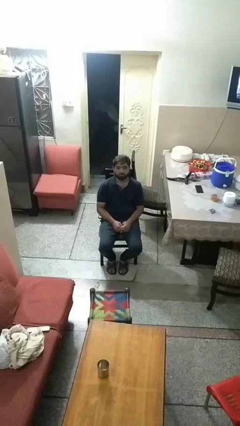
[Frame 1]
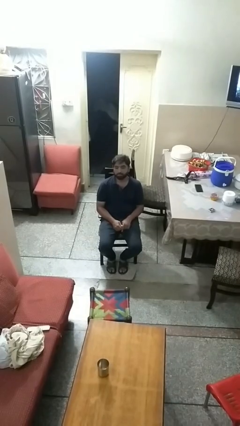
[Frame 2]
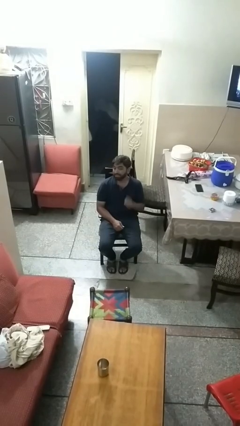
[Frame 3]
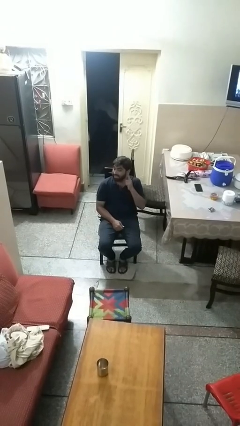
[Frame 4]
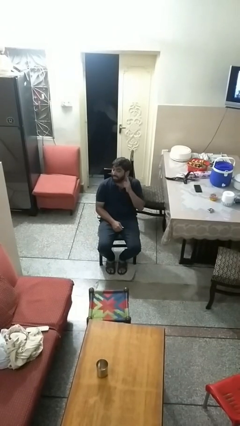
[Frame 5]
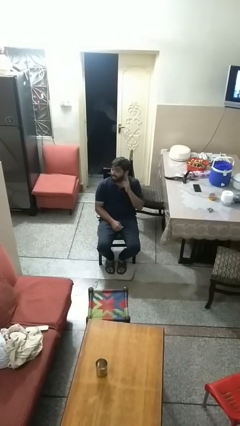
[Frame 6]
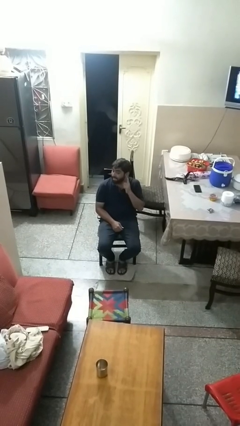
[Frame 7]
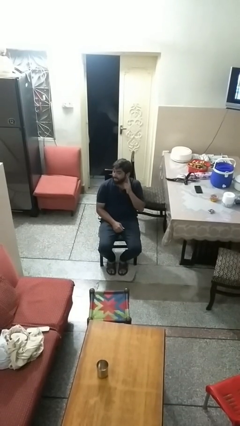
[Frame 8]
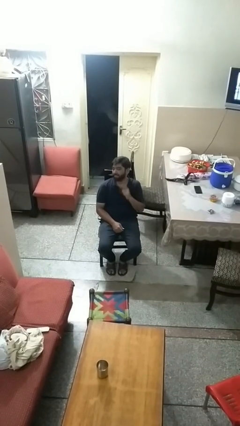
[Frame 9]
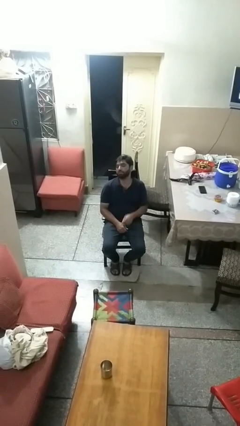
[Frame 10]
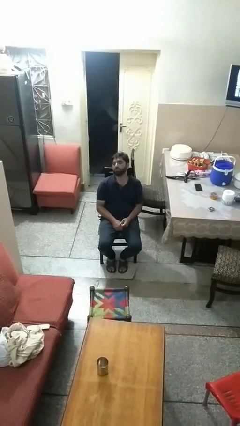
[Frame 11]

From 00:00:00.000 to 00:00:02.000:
person gestures listen closely

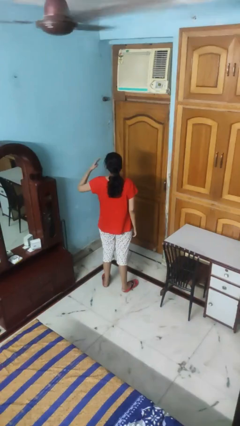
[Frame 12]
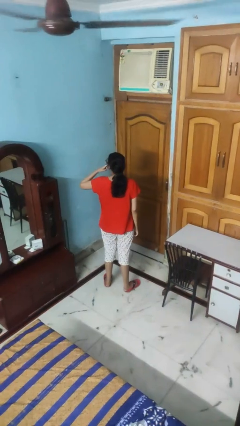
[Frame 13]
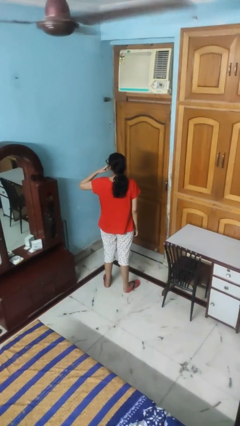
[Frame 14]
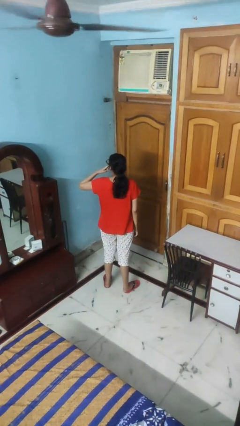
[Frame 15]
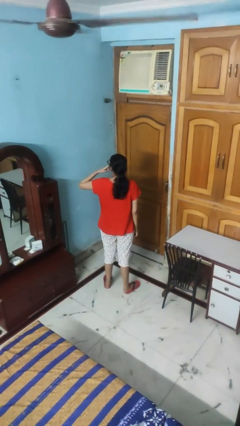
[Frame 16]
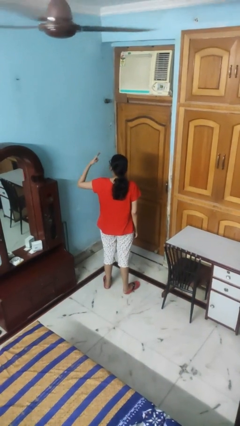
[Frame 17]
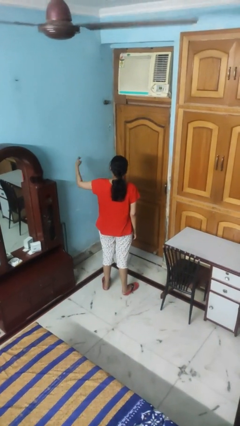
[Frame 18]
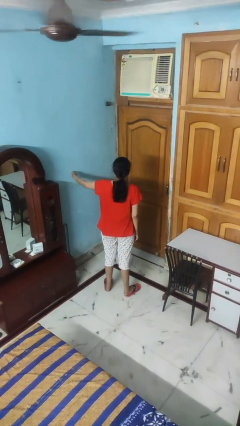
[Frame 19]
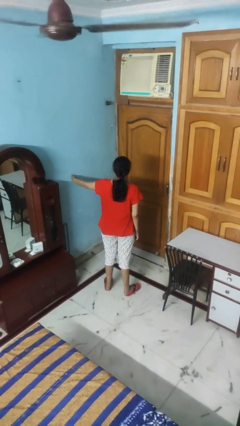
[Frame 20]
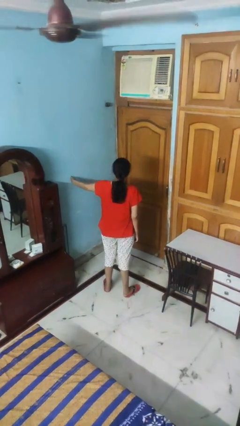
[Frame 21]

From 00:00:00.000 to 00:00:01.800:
person gestures blow kiss

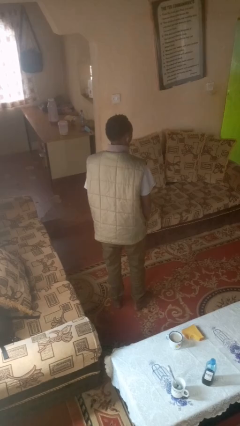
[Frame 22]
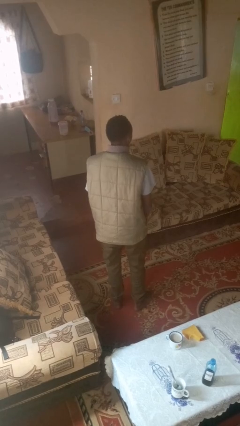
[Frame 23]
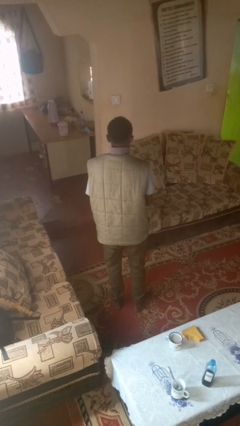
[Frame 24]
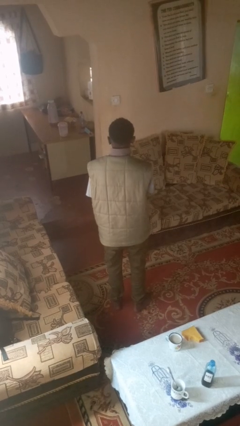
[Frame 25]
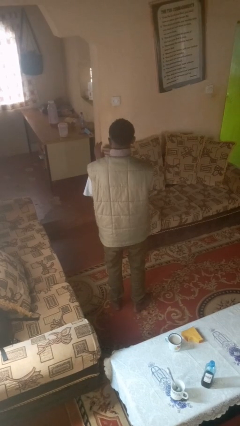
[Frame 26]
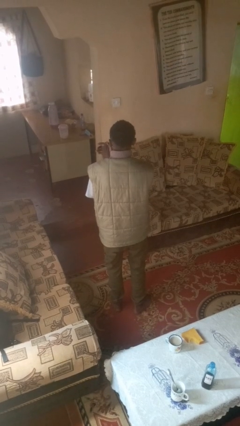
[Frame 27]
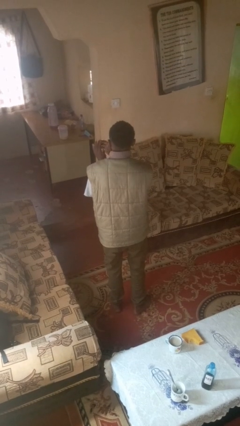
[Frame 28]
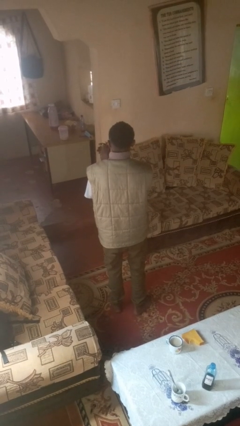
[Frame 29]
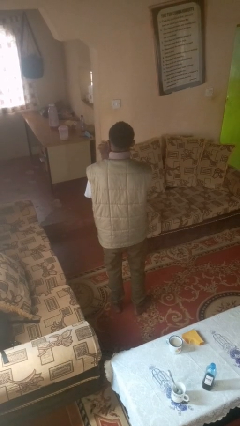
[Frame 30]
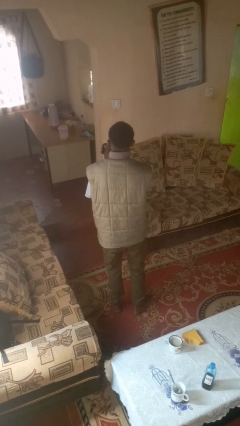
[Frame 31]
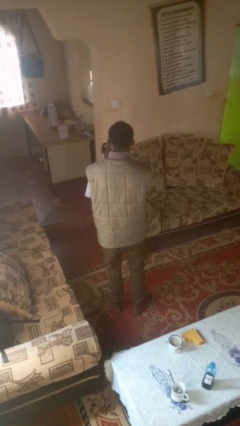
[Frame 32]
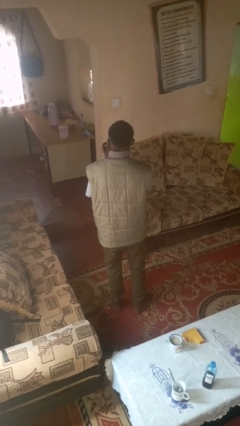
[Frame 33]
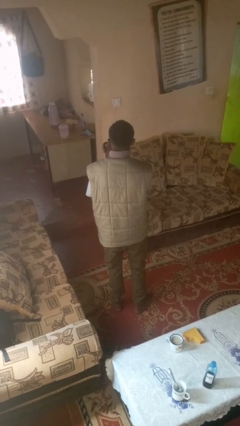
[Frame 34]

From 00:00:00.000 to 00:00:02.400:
person claps hands

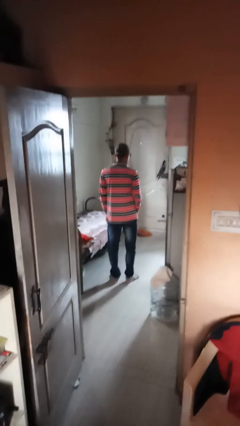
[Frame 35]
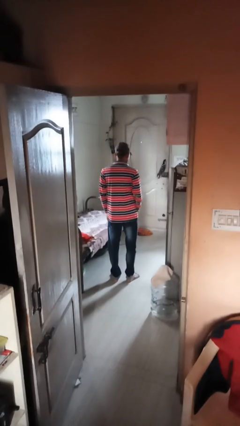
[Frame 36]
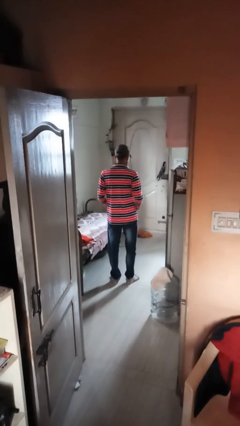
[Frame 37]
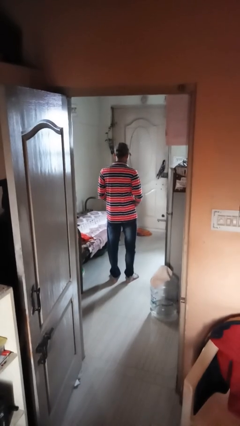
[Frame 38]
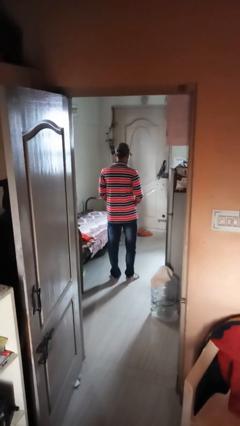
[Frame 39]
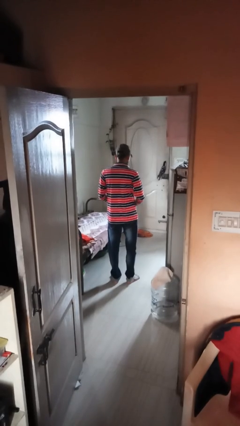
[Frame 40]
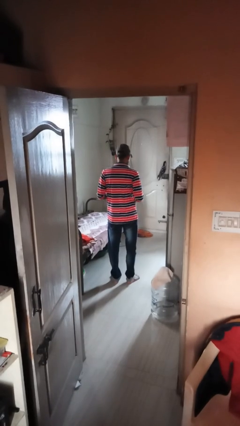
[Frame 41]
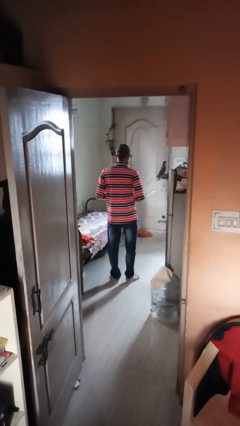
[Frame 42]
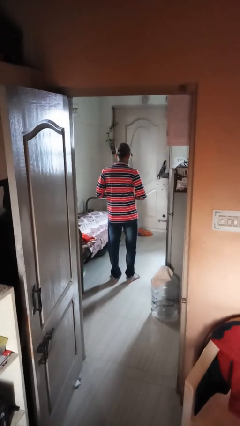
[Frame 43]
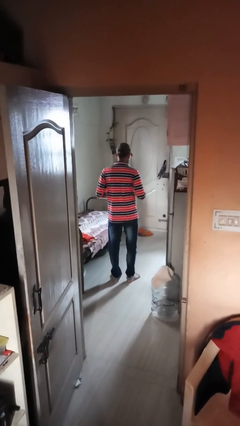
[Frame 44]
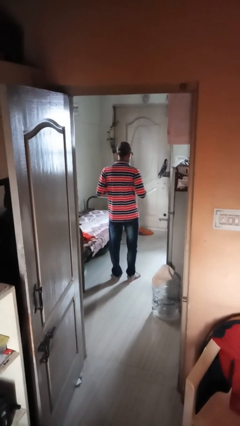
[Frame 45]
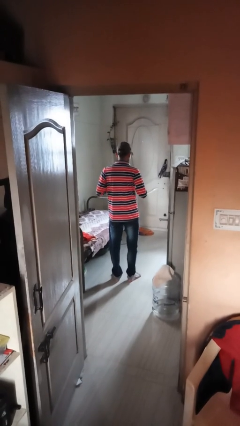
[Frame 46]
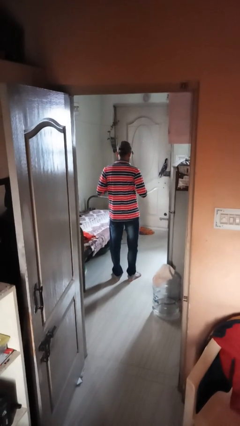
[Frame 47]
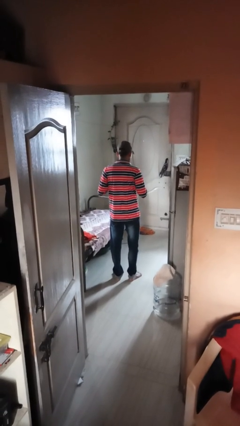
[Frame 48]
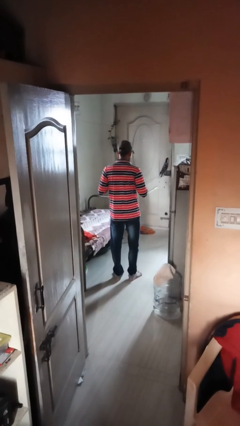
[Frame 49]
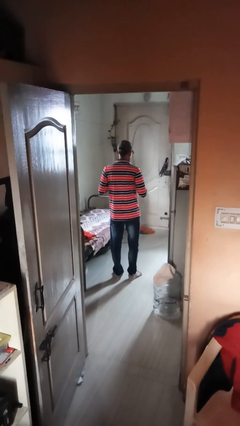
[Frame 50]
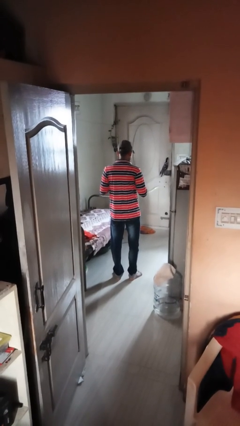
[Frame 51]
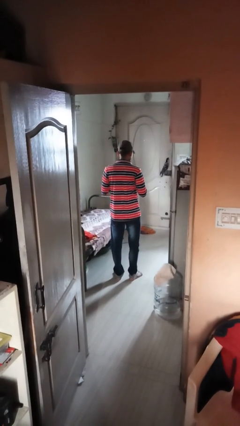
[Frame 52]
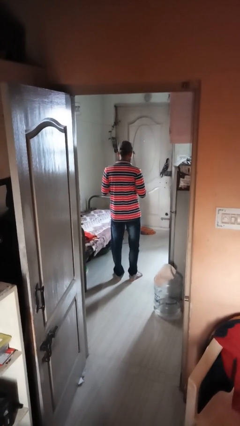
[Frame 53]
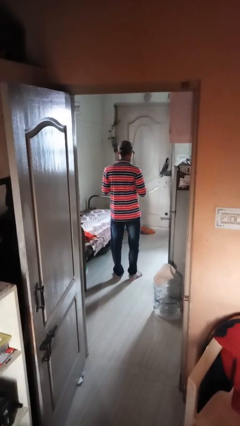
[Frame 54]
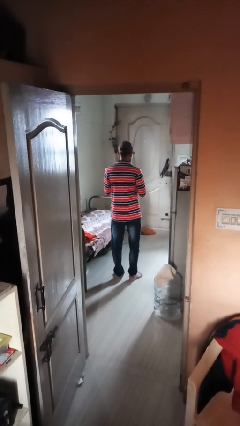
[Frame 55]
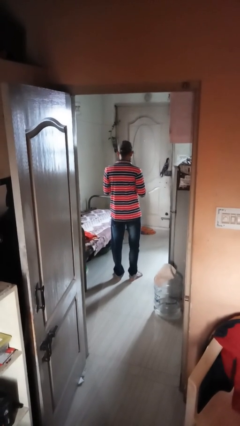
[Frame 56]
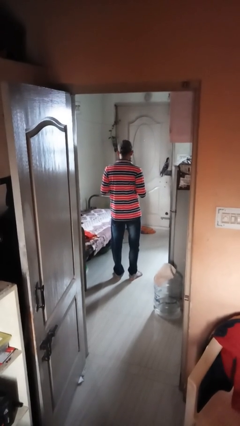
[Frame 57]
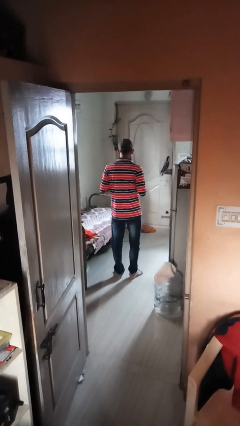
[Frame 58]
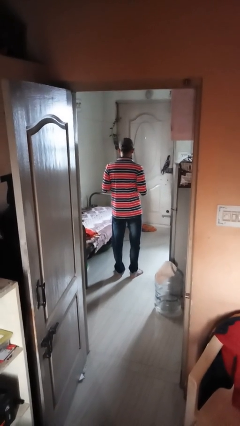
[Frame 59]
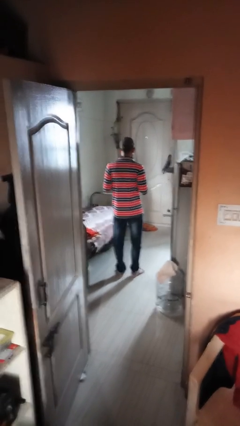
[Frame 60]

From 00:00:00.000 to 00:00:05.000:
person buttons shirt

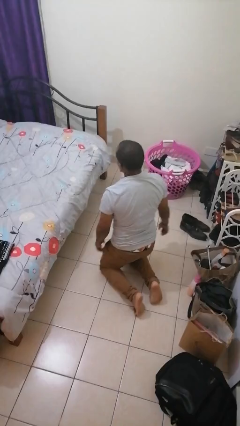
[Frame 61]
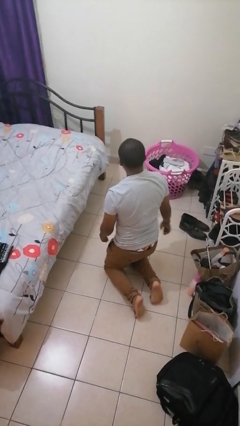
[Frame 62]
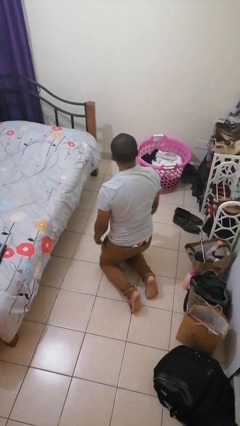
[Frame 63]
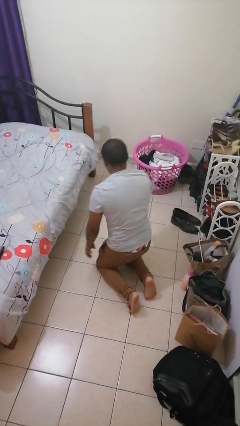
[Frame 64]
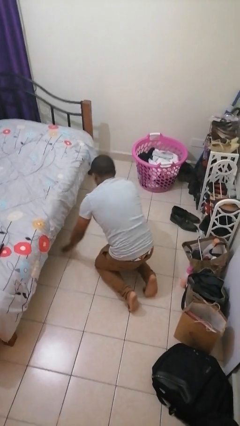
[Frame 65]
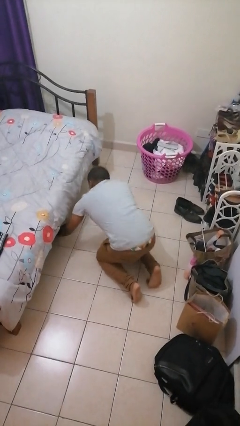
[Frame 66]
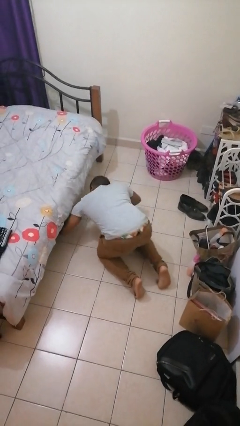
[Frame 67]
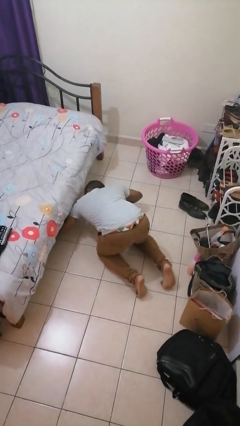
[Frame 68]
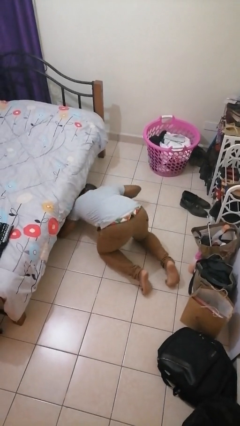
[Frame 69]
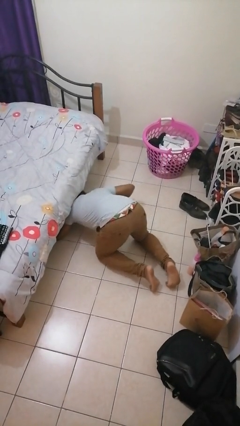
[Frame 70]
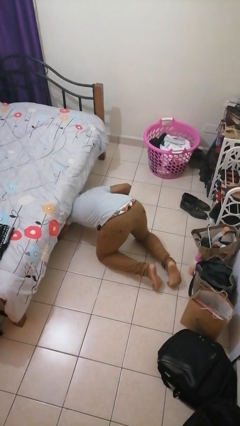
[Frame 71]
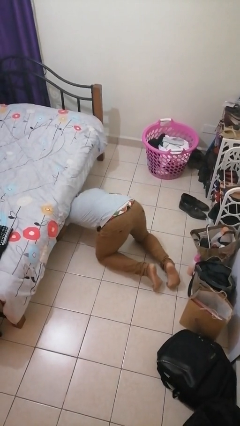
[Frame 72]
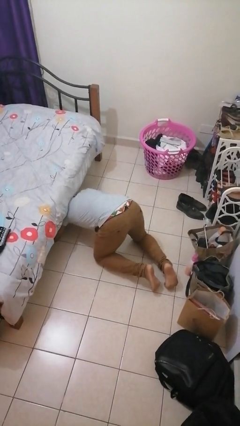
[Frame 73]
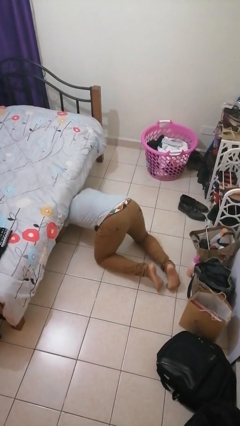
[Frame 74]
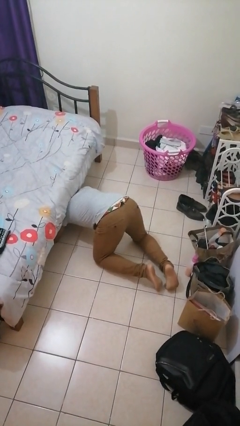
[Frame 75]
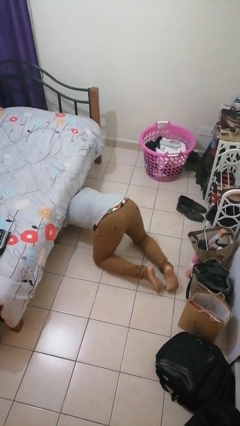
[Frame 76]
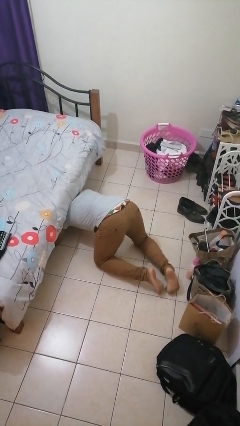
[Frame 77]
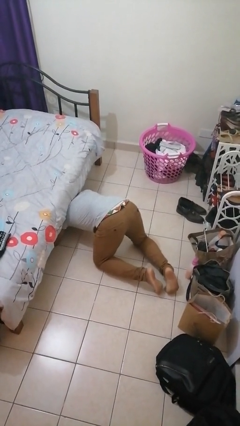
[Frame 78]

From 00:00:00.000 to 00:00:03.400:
person searches under bed

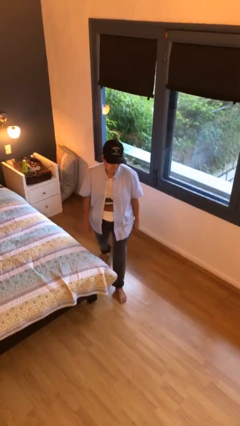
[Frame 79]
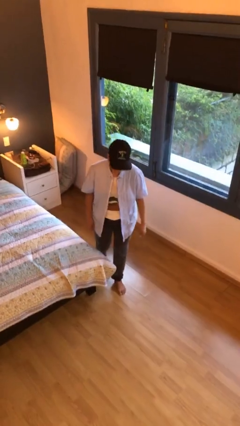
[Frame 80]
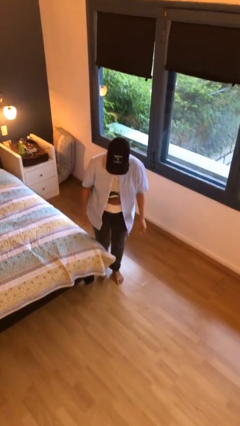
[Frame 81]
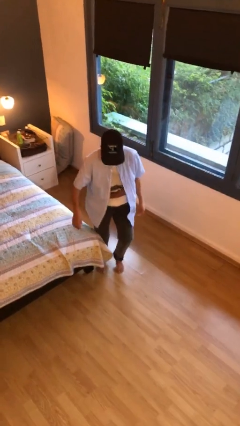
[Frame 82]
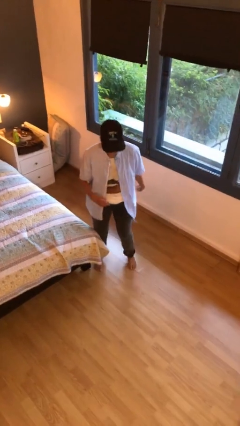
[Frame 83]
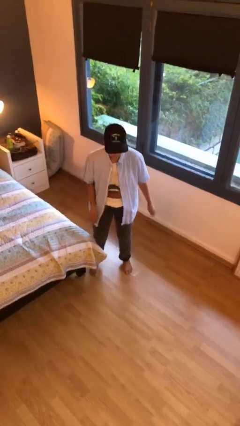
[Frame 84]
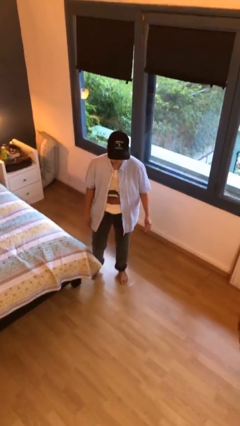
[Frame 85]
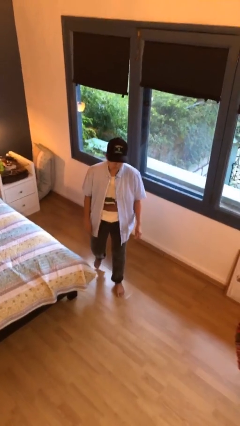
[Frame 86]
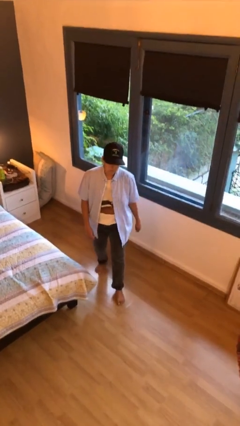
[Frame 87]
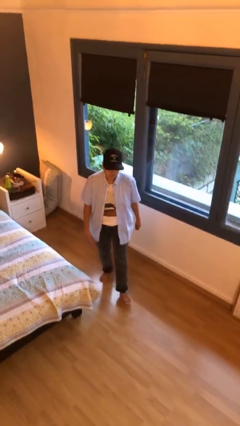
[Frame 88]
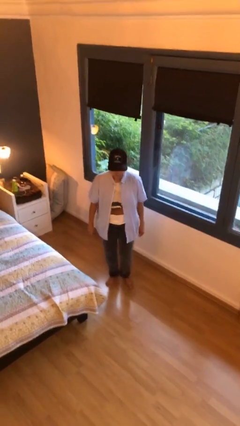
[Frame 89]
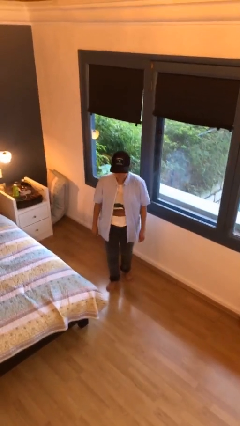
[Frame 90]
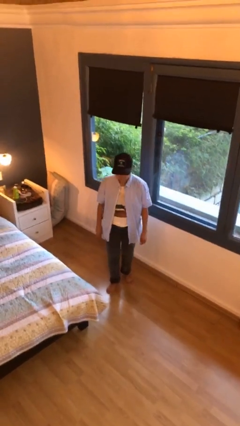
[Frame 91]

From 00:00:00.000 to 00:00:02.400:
person stubs toe

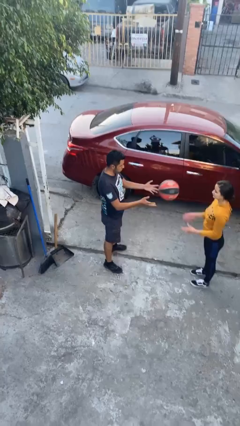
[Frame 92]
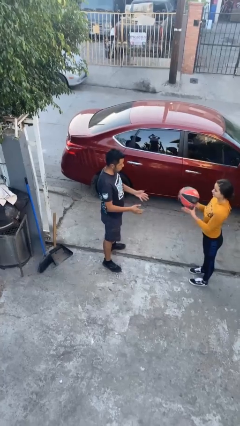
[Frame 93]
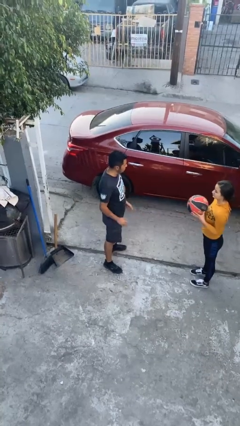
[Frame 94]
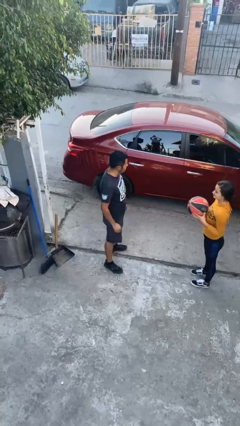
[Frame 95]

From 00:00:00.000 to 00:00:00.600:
person throws object to person
